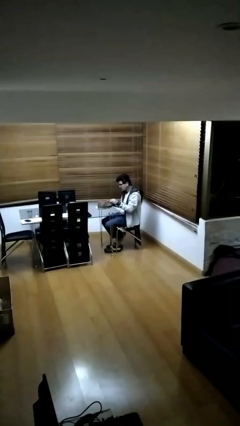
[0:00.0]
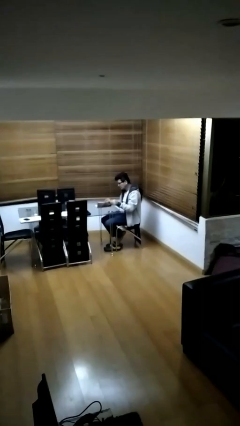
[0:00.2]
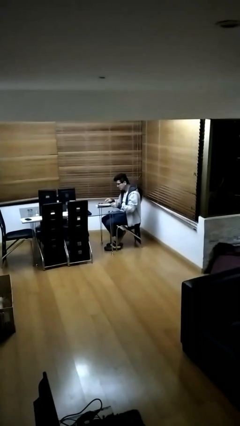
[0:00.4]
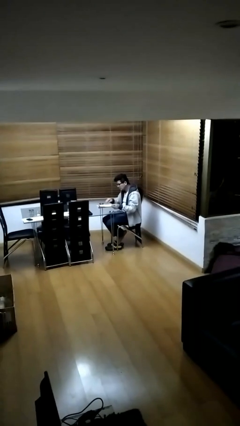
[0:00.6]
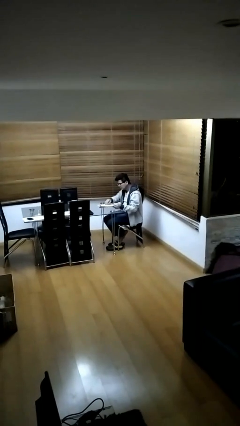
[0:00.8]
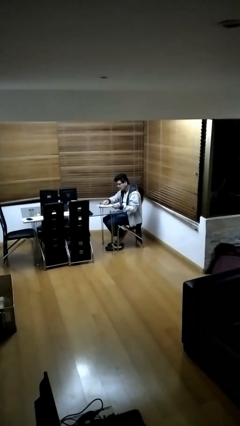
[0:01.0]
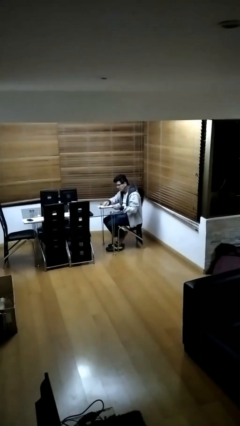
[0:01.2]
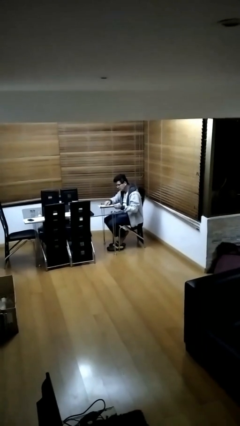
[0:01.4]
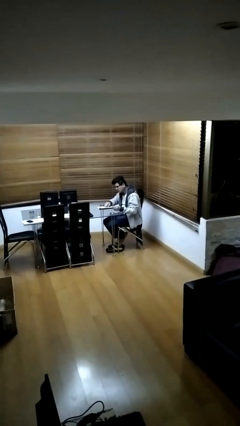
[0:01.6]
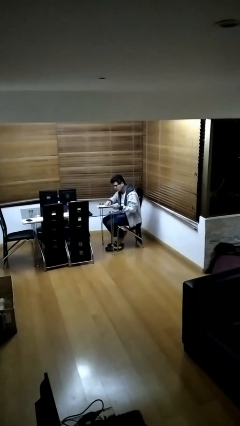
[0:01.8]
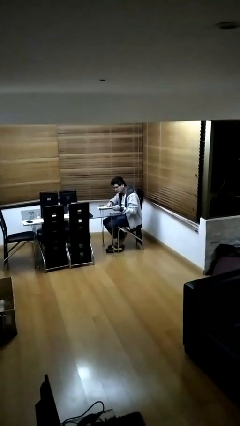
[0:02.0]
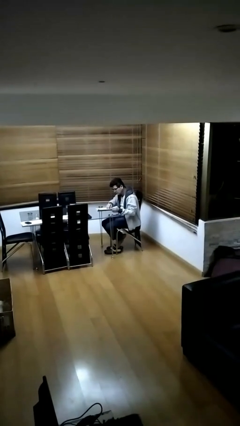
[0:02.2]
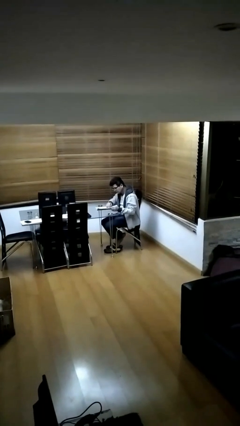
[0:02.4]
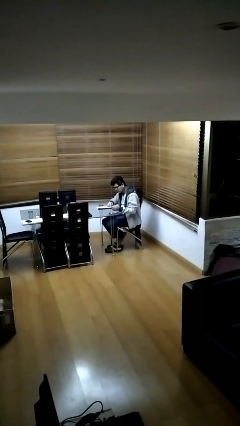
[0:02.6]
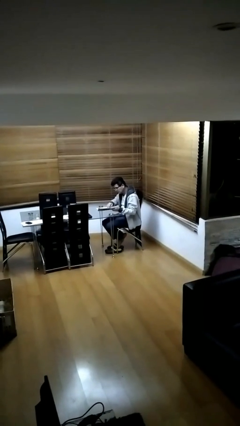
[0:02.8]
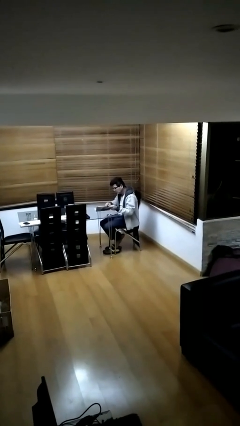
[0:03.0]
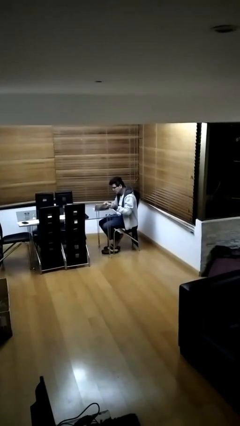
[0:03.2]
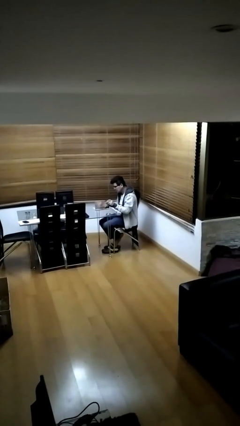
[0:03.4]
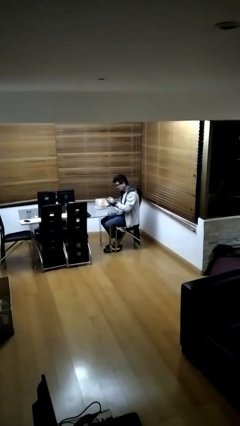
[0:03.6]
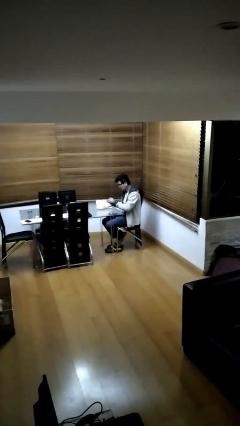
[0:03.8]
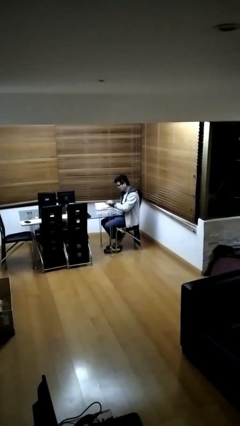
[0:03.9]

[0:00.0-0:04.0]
person reads document

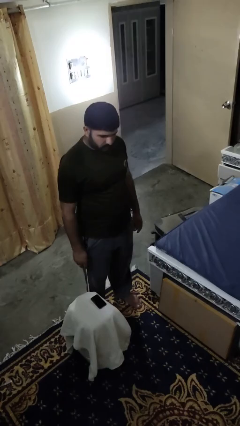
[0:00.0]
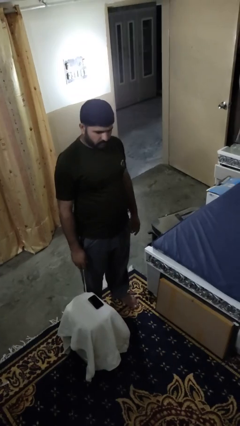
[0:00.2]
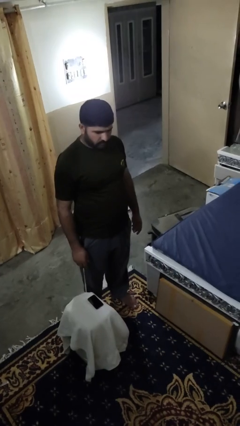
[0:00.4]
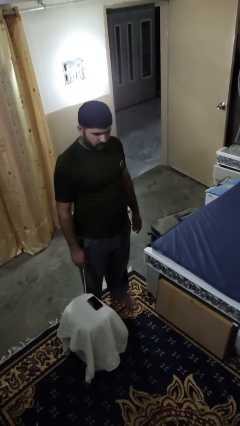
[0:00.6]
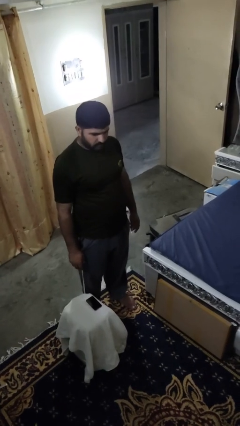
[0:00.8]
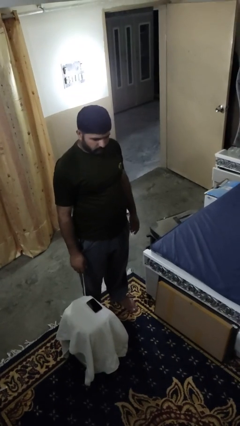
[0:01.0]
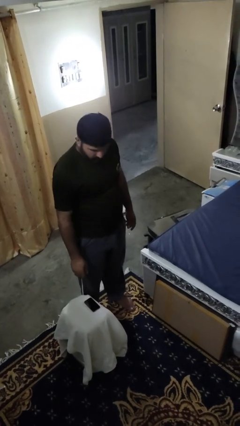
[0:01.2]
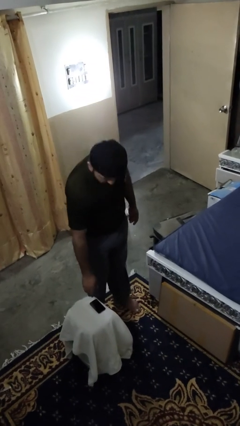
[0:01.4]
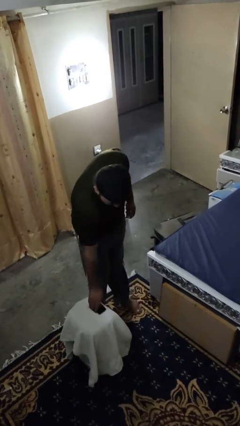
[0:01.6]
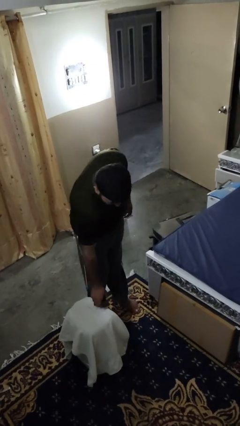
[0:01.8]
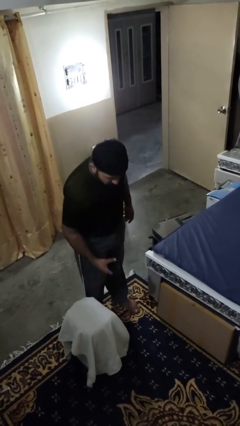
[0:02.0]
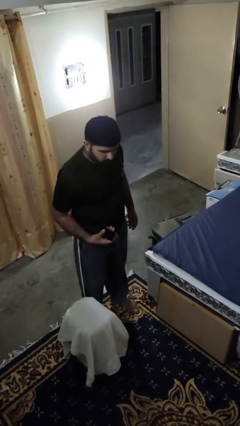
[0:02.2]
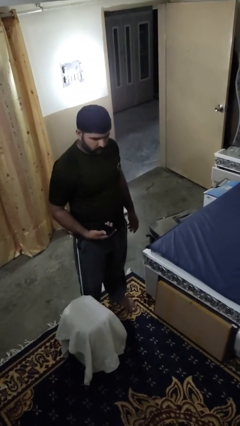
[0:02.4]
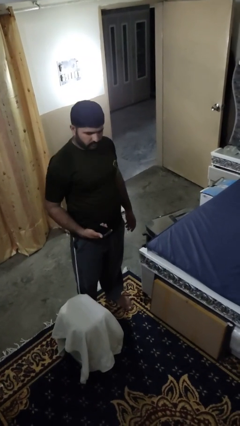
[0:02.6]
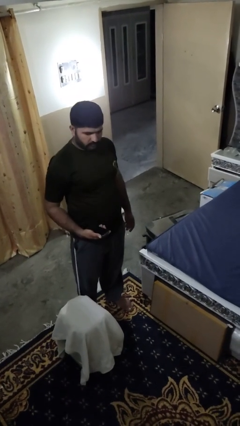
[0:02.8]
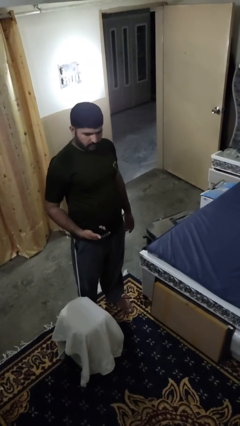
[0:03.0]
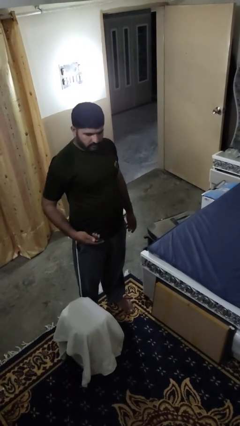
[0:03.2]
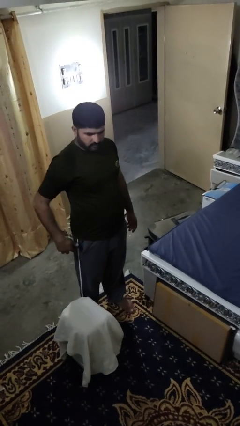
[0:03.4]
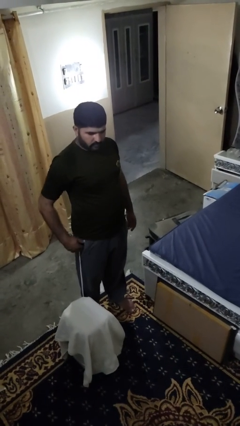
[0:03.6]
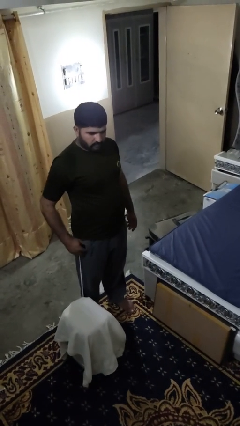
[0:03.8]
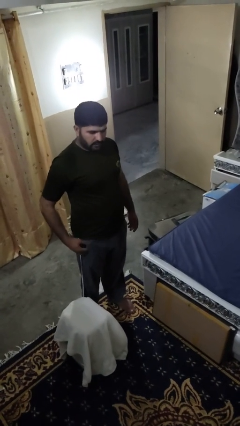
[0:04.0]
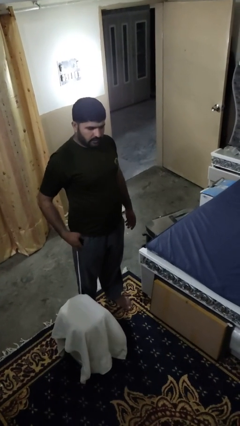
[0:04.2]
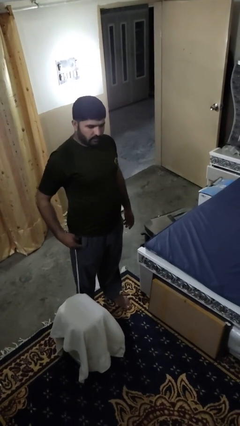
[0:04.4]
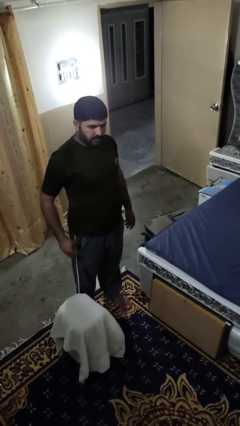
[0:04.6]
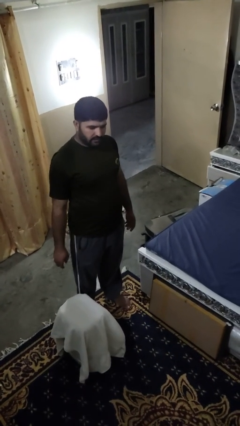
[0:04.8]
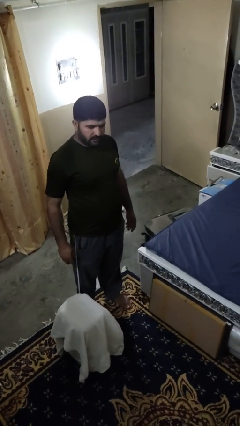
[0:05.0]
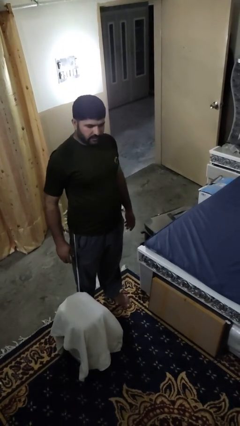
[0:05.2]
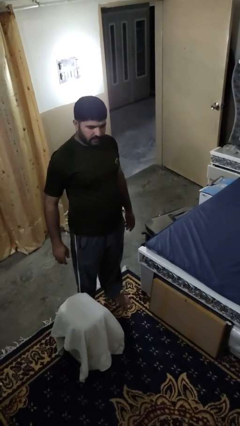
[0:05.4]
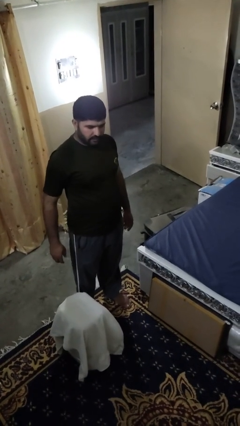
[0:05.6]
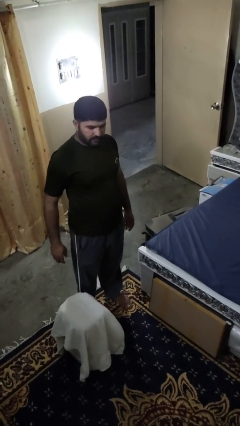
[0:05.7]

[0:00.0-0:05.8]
person takes phone from pocket

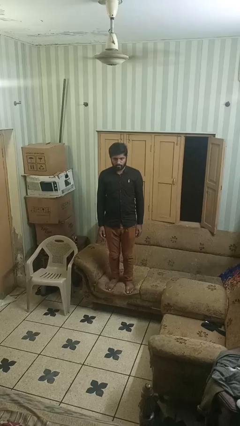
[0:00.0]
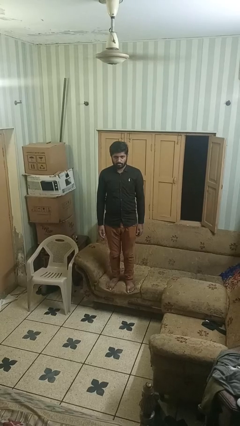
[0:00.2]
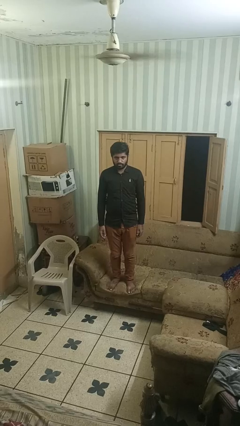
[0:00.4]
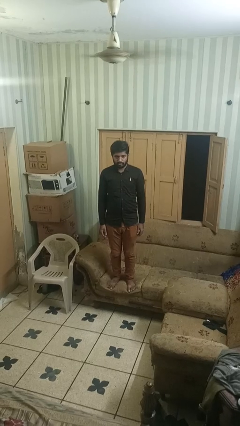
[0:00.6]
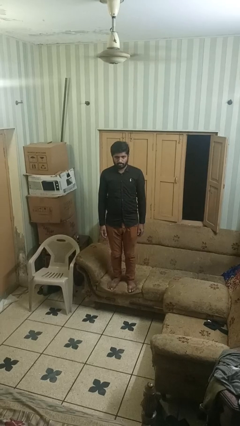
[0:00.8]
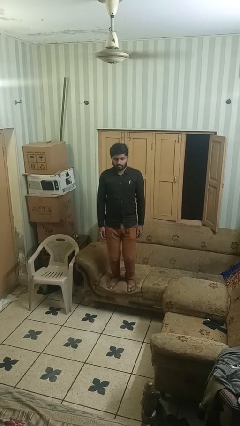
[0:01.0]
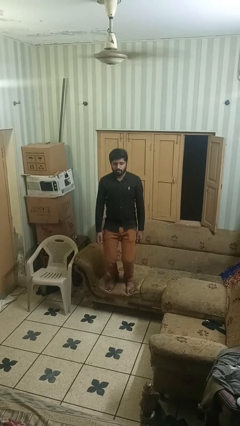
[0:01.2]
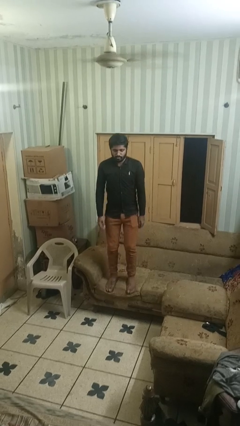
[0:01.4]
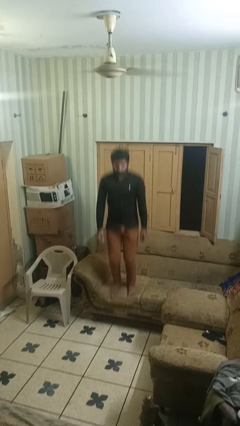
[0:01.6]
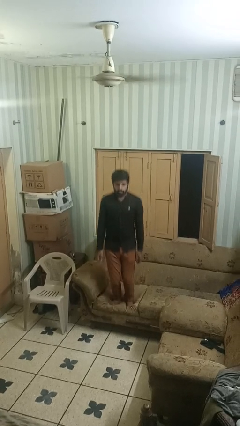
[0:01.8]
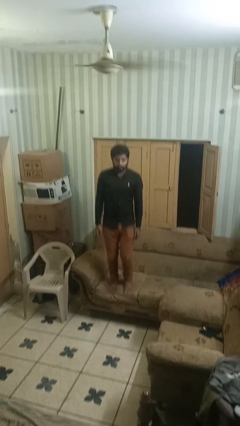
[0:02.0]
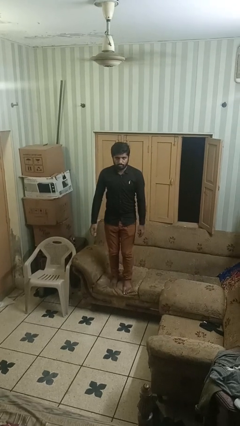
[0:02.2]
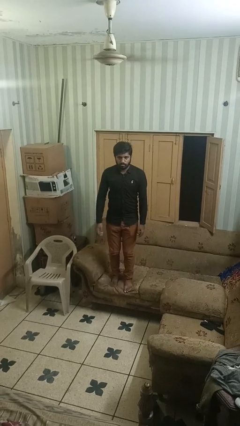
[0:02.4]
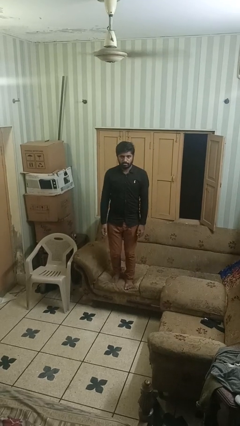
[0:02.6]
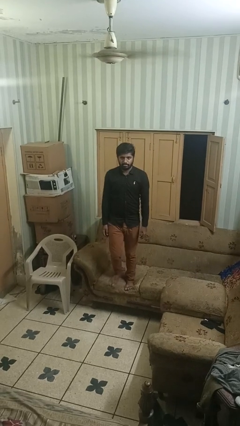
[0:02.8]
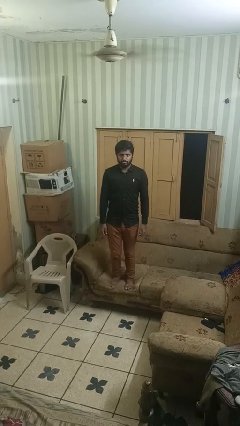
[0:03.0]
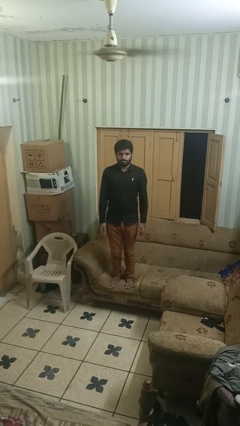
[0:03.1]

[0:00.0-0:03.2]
person jumps on couch

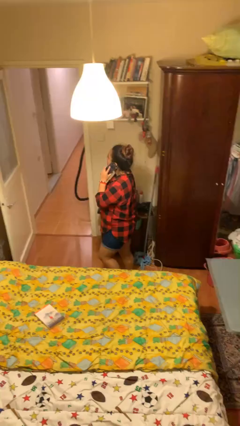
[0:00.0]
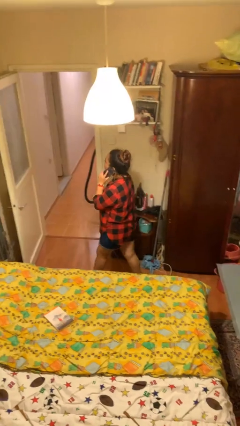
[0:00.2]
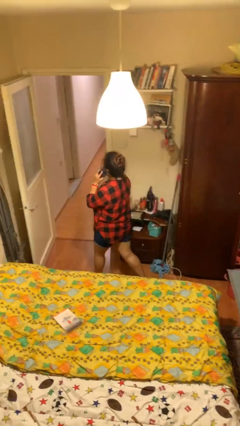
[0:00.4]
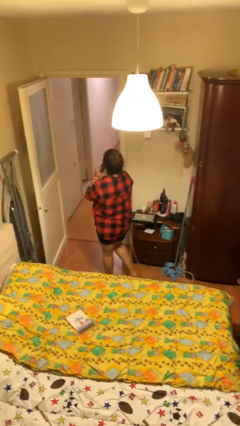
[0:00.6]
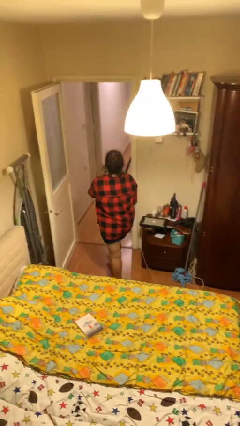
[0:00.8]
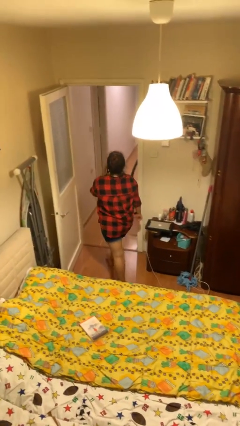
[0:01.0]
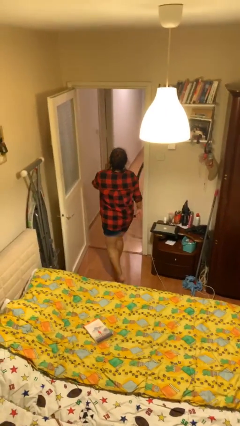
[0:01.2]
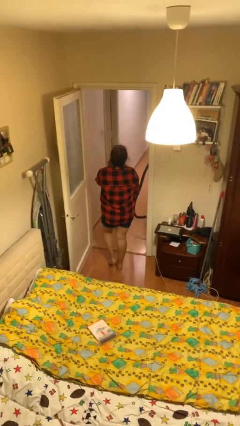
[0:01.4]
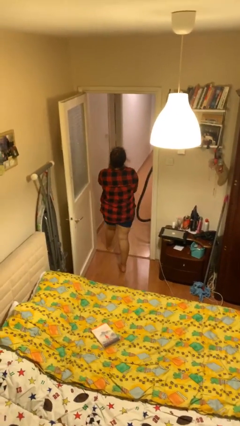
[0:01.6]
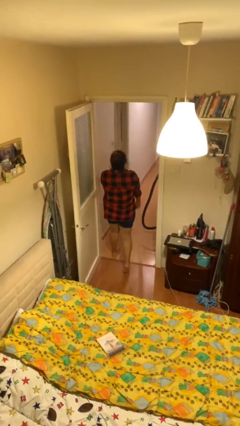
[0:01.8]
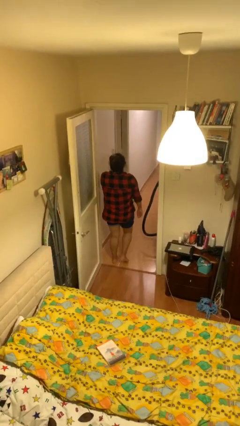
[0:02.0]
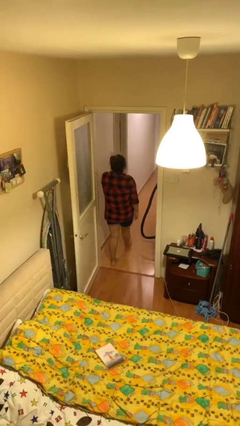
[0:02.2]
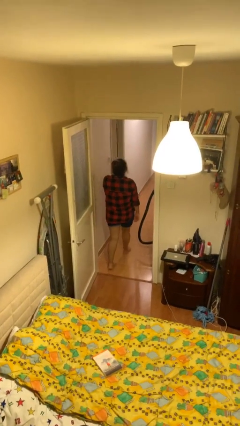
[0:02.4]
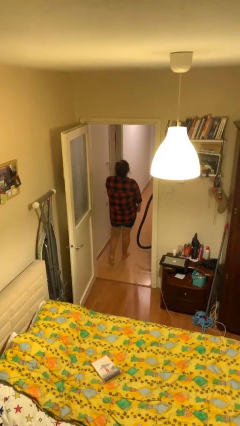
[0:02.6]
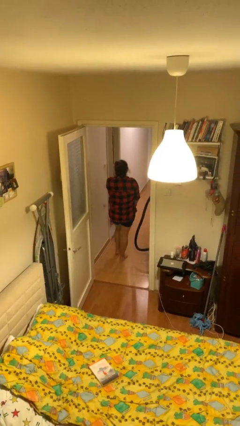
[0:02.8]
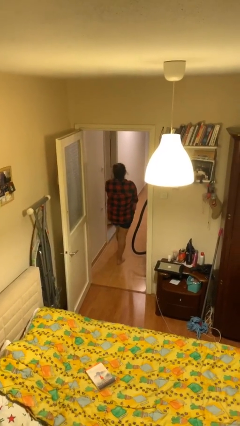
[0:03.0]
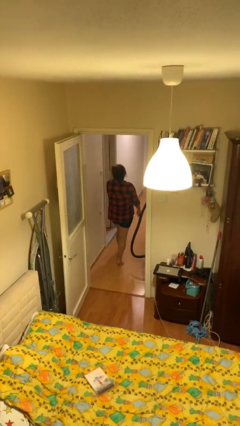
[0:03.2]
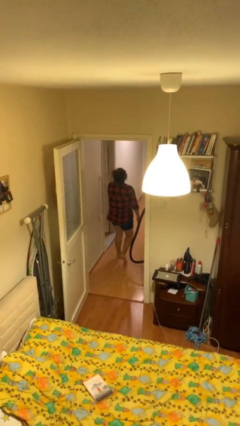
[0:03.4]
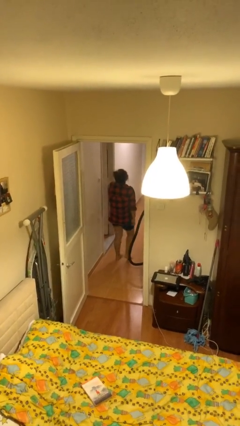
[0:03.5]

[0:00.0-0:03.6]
person exits scene through structure

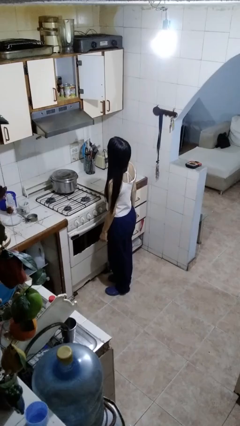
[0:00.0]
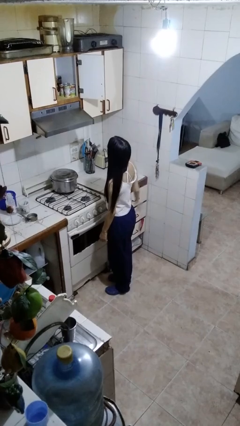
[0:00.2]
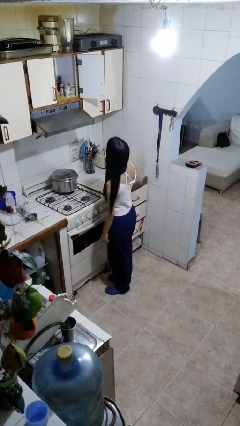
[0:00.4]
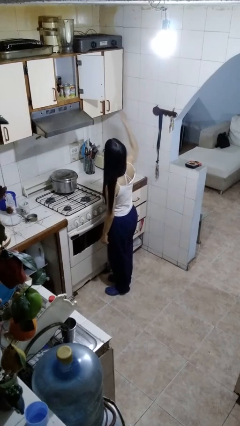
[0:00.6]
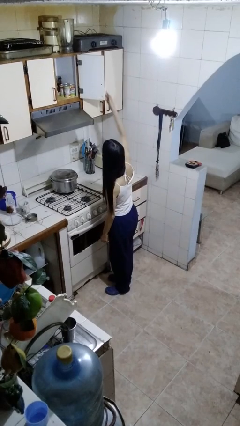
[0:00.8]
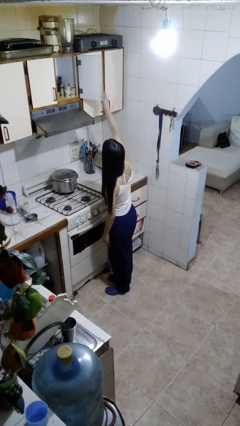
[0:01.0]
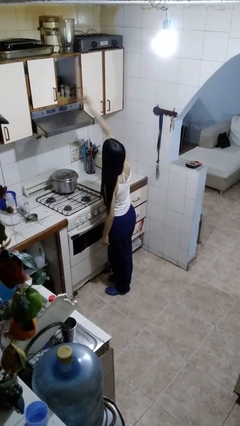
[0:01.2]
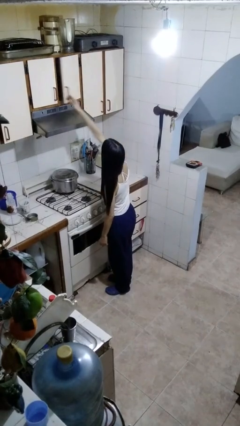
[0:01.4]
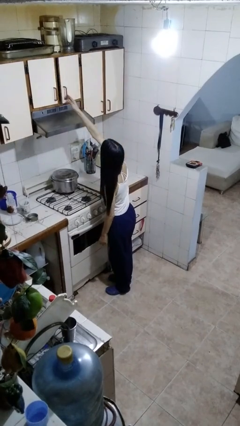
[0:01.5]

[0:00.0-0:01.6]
person closes cabinet
